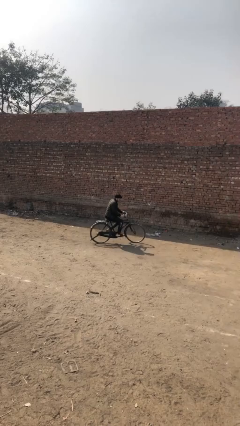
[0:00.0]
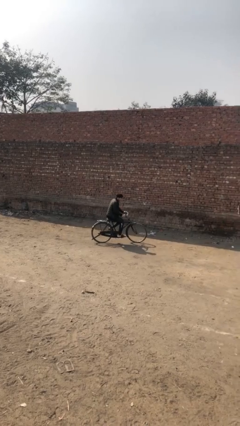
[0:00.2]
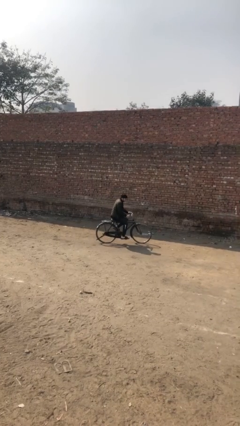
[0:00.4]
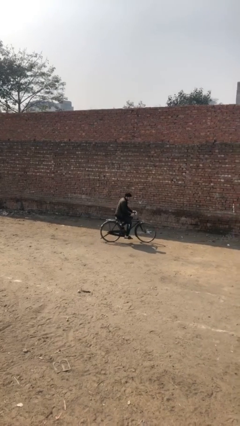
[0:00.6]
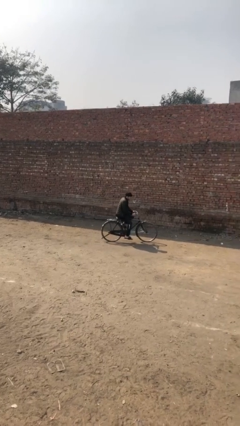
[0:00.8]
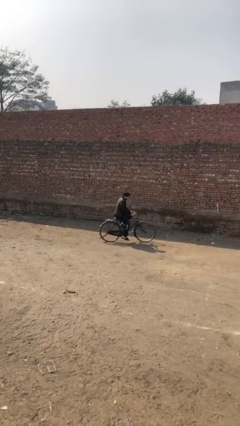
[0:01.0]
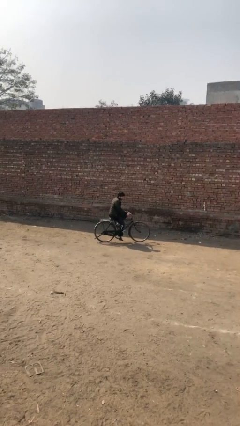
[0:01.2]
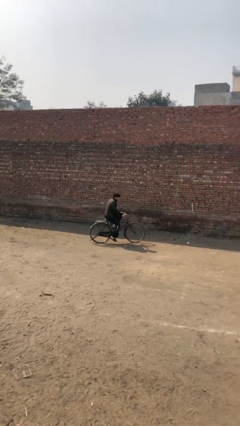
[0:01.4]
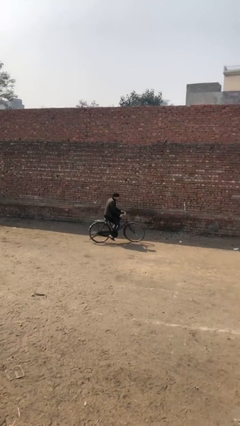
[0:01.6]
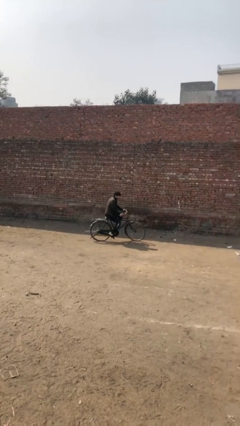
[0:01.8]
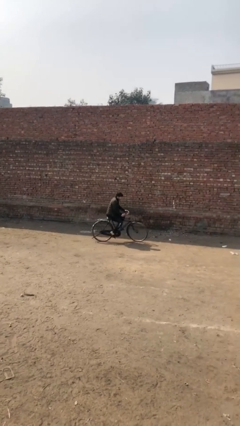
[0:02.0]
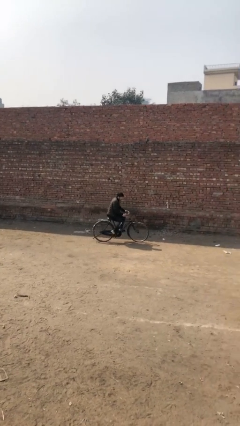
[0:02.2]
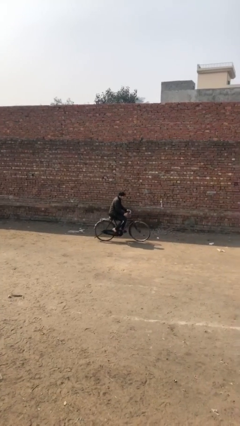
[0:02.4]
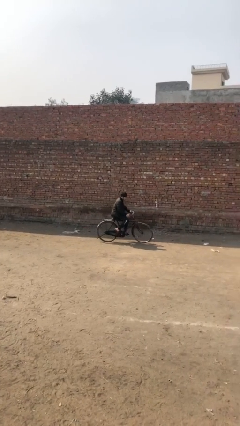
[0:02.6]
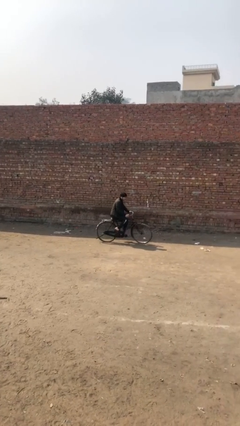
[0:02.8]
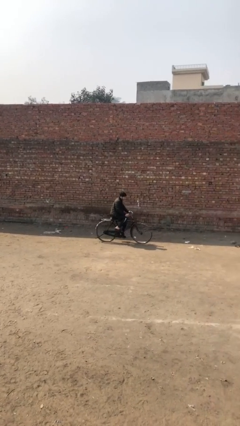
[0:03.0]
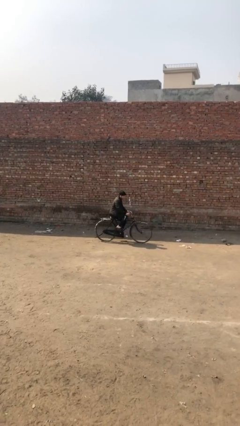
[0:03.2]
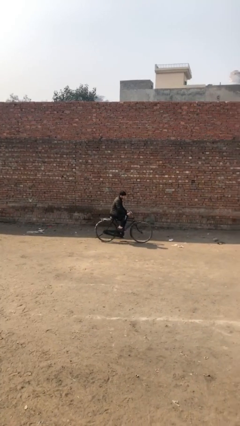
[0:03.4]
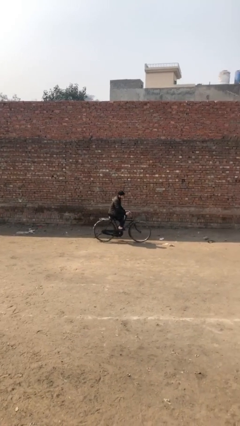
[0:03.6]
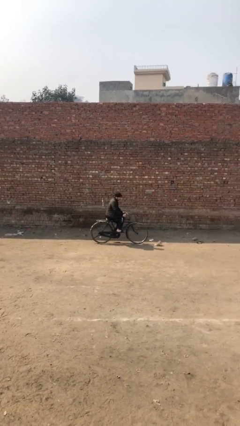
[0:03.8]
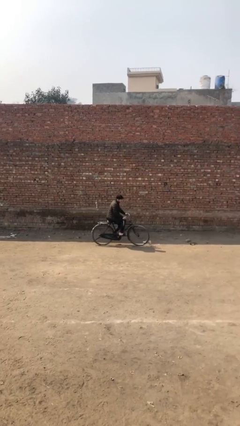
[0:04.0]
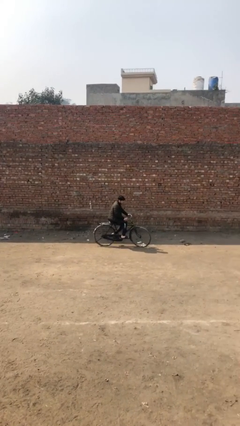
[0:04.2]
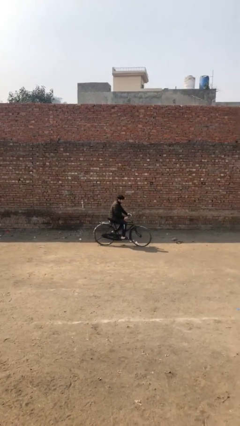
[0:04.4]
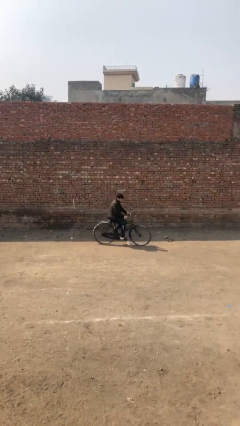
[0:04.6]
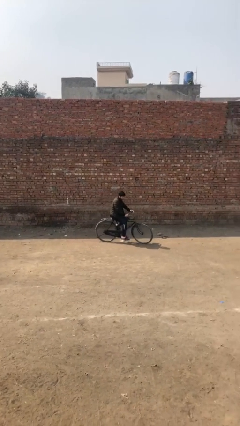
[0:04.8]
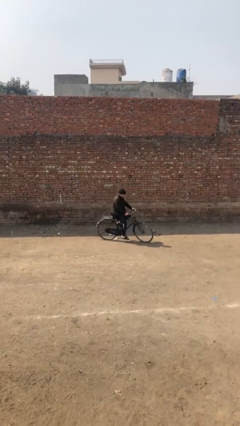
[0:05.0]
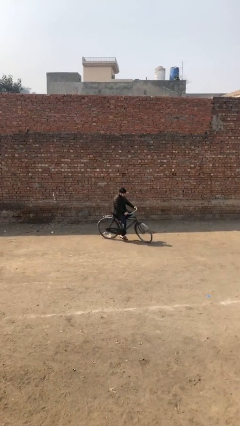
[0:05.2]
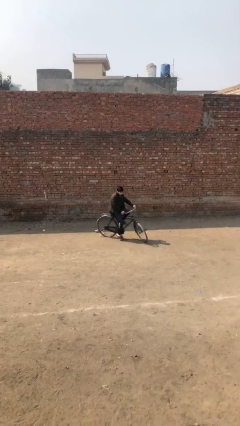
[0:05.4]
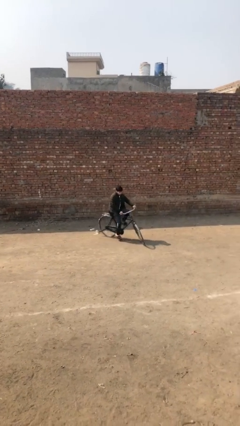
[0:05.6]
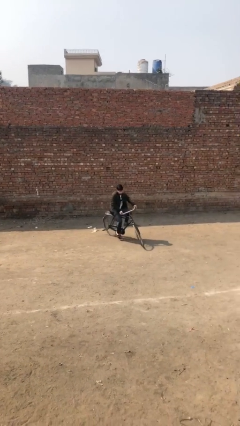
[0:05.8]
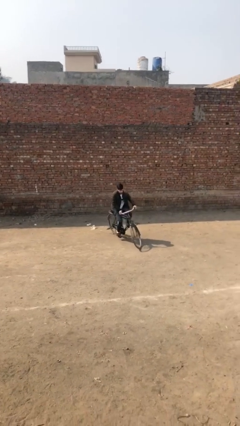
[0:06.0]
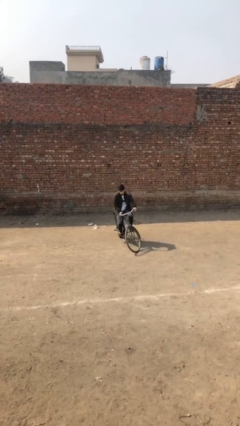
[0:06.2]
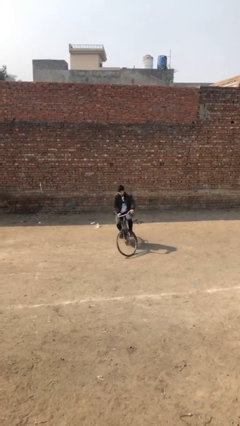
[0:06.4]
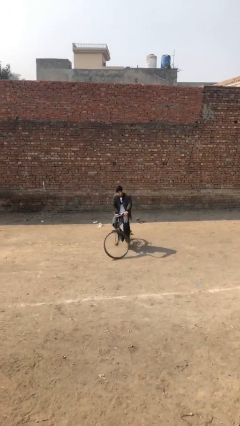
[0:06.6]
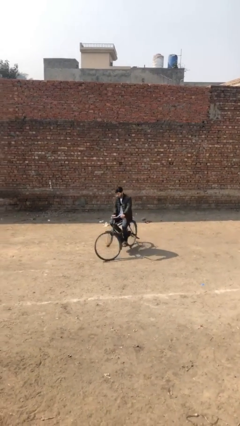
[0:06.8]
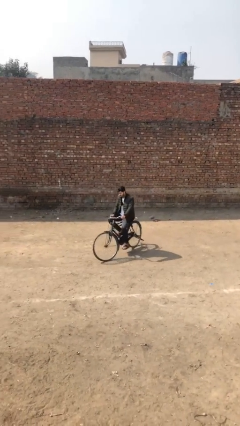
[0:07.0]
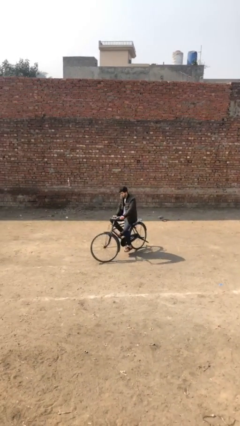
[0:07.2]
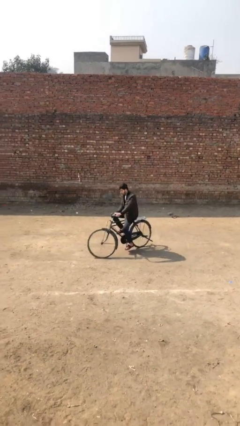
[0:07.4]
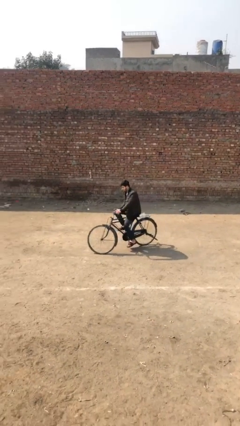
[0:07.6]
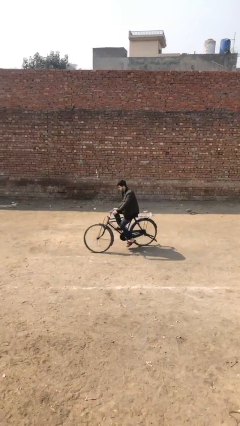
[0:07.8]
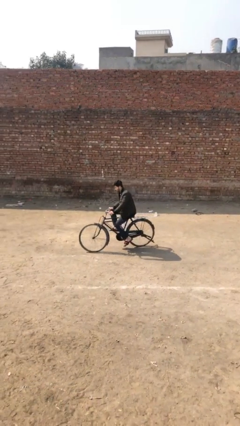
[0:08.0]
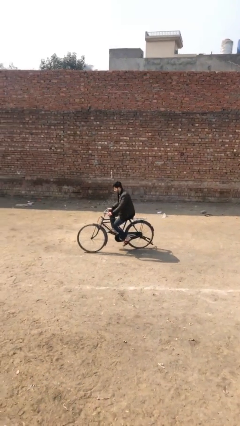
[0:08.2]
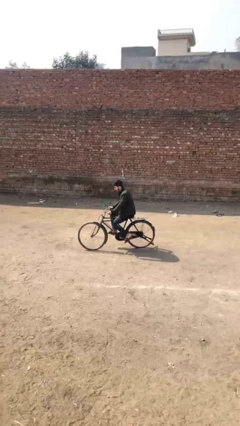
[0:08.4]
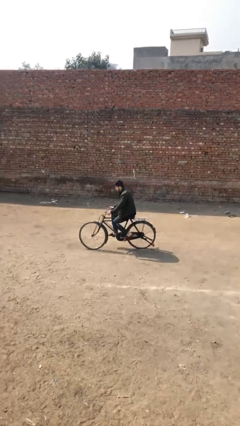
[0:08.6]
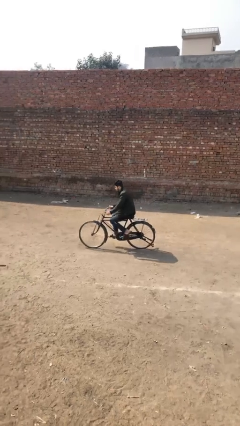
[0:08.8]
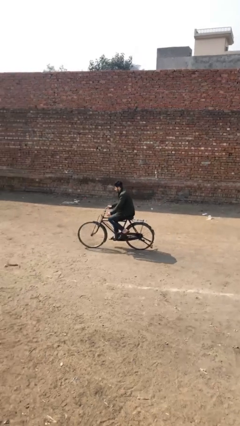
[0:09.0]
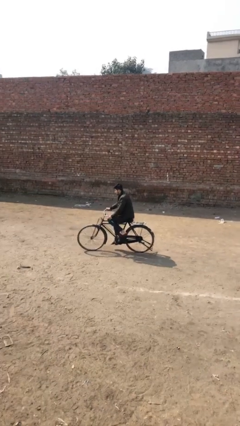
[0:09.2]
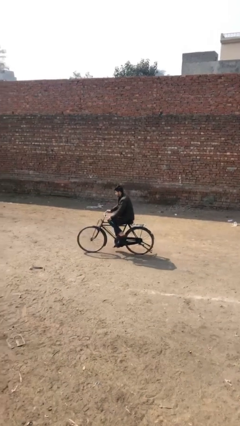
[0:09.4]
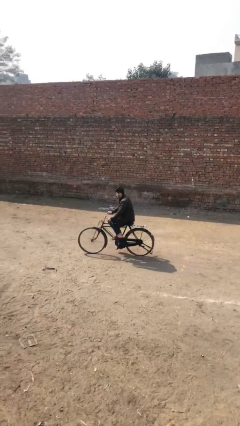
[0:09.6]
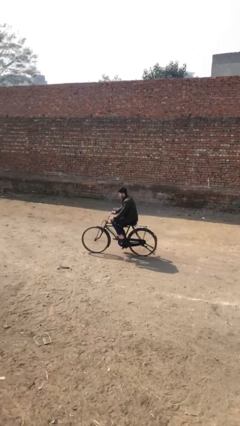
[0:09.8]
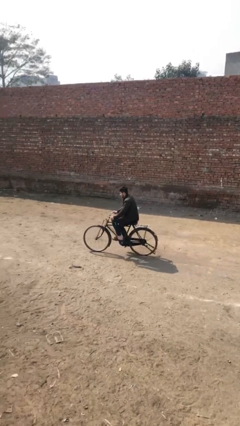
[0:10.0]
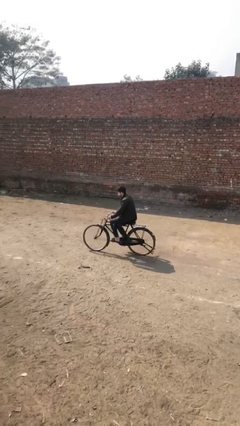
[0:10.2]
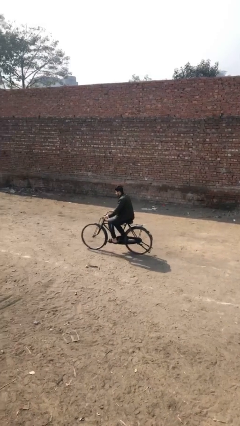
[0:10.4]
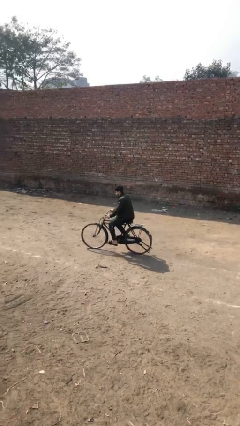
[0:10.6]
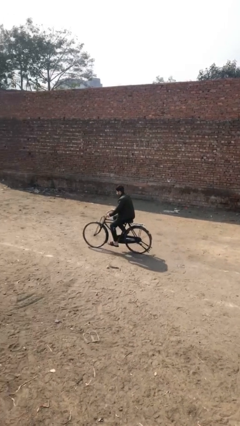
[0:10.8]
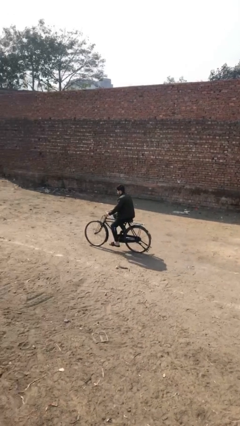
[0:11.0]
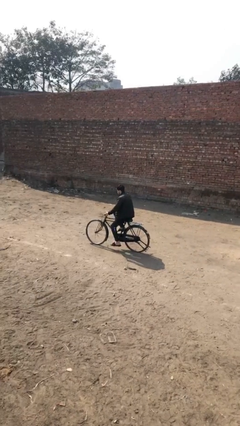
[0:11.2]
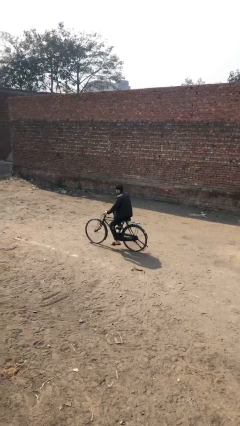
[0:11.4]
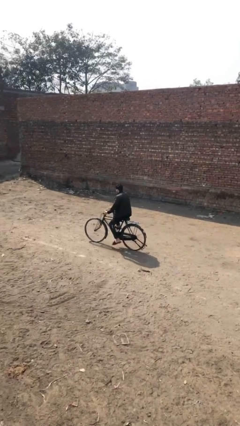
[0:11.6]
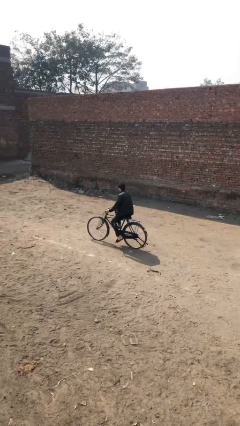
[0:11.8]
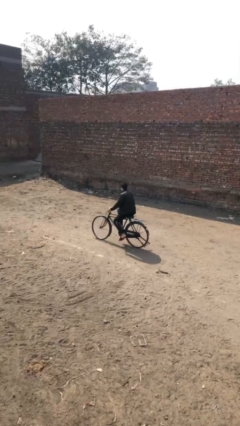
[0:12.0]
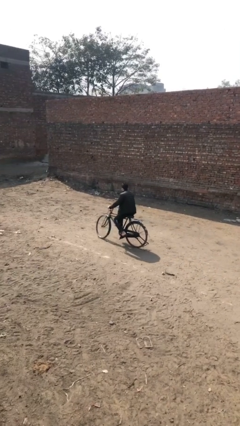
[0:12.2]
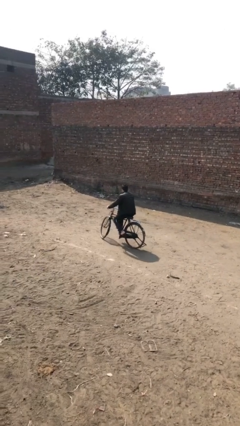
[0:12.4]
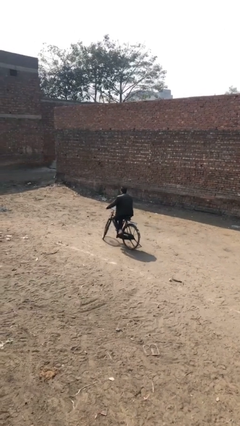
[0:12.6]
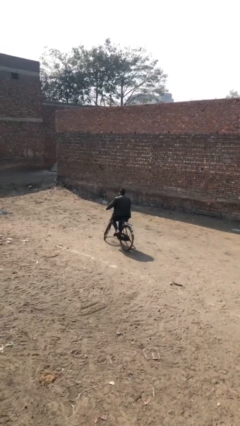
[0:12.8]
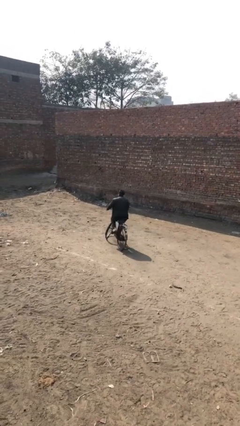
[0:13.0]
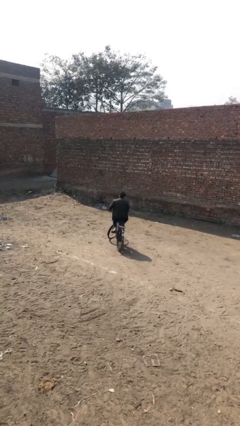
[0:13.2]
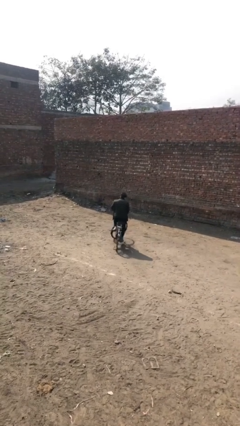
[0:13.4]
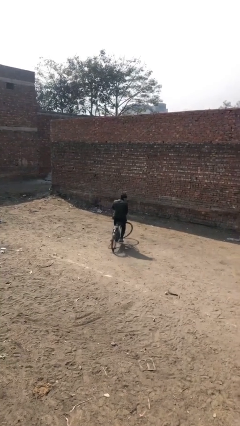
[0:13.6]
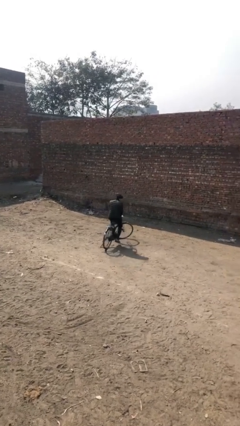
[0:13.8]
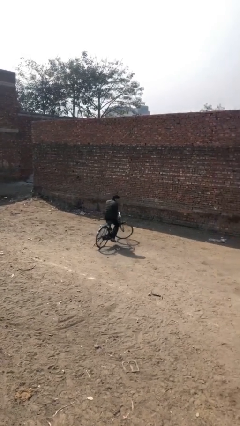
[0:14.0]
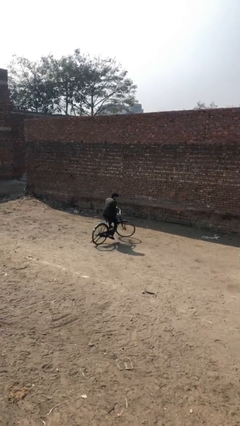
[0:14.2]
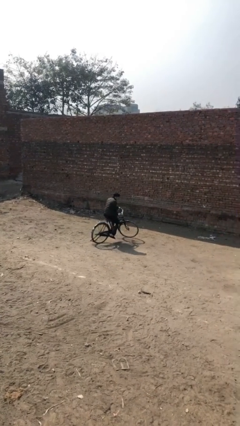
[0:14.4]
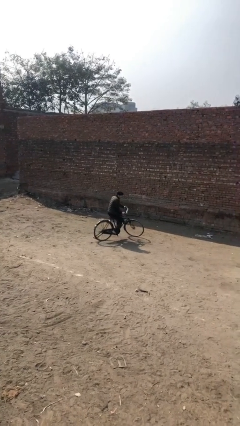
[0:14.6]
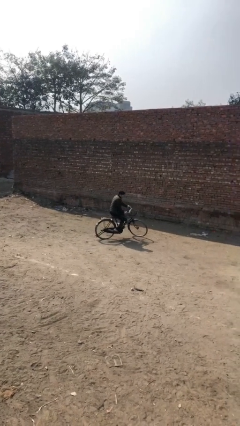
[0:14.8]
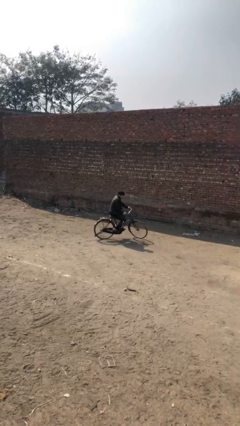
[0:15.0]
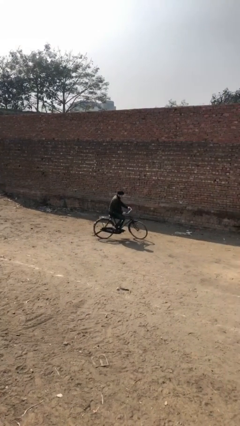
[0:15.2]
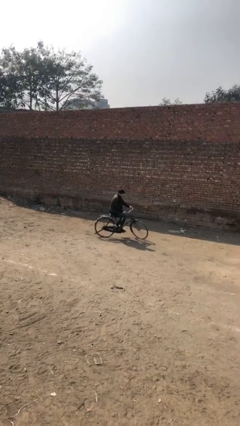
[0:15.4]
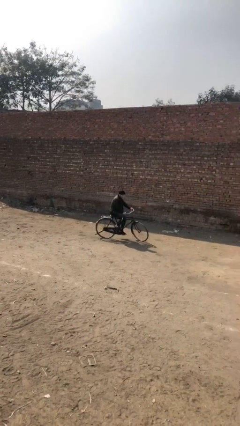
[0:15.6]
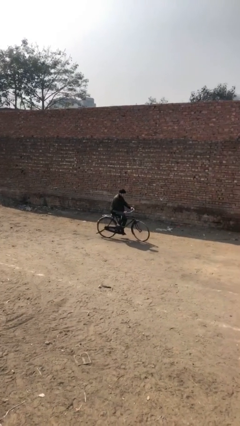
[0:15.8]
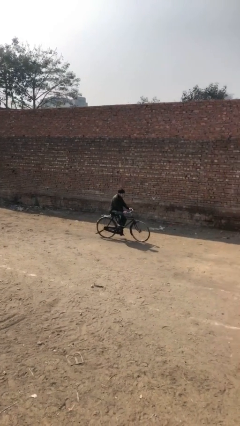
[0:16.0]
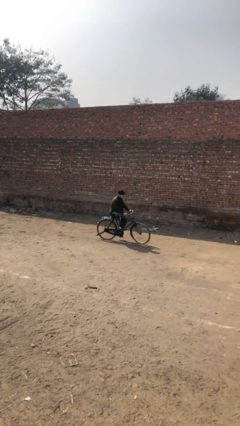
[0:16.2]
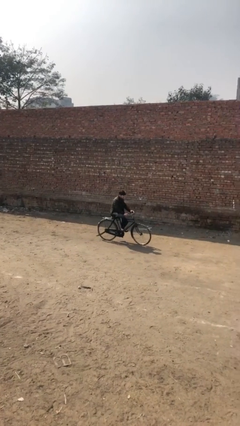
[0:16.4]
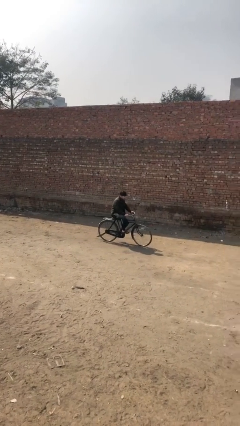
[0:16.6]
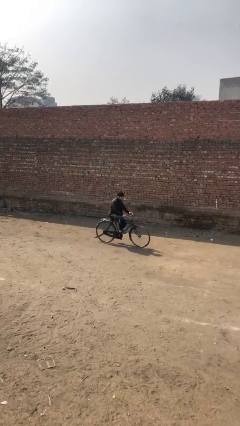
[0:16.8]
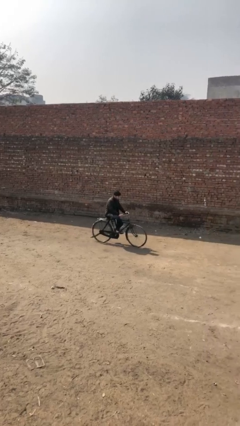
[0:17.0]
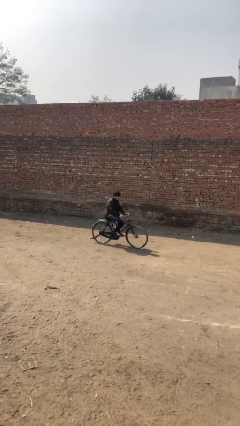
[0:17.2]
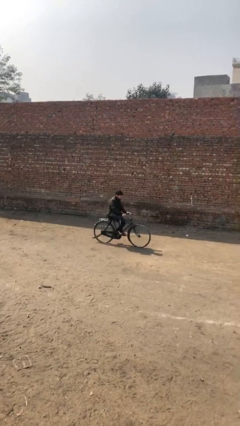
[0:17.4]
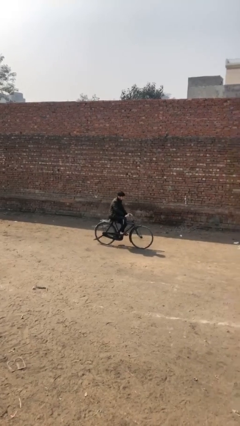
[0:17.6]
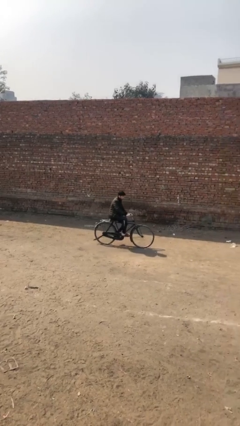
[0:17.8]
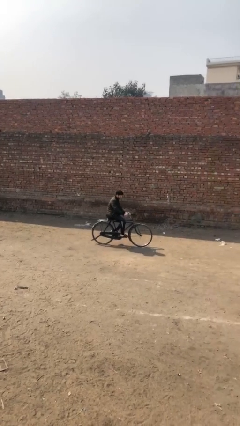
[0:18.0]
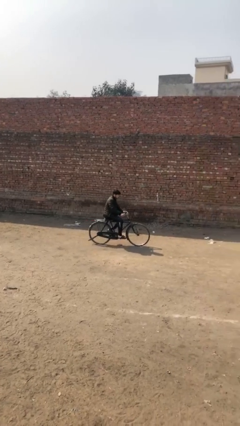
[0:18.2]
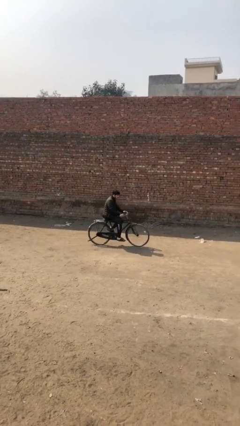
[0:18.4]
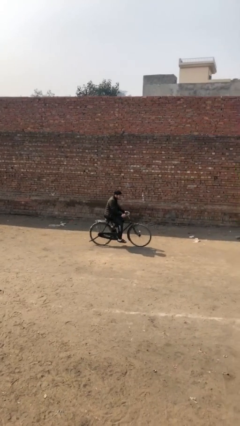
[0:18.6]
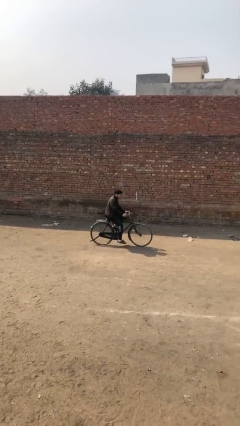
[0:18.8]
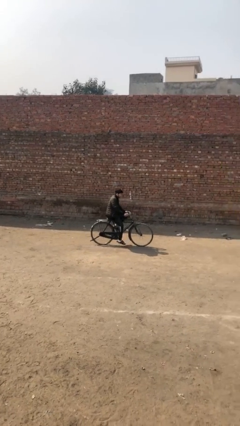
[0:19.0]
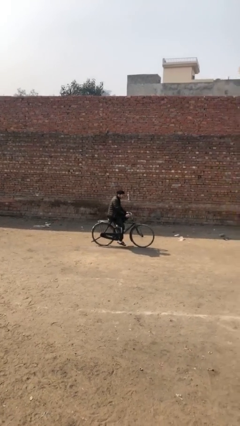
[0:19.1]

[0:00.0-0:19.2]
person rides bicycle
